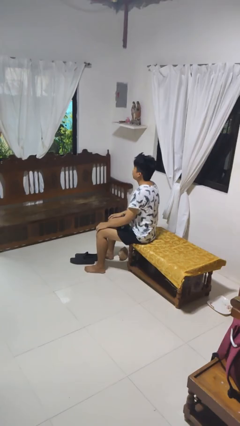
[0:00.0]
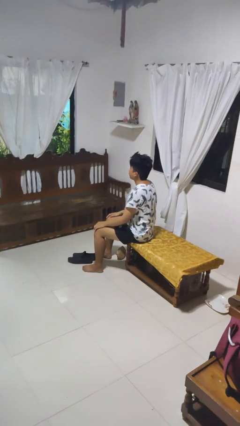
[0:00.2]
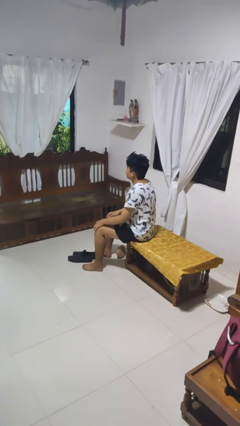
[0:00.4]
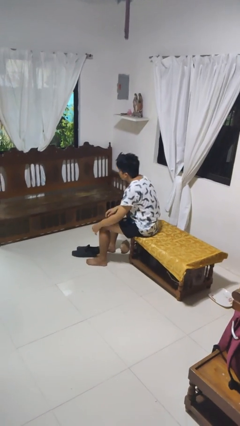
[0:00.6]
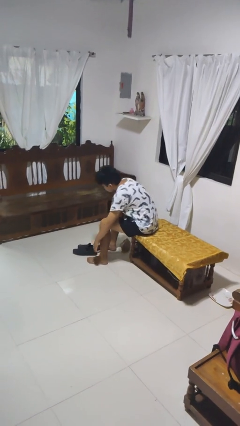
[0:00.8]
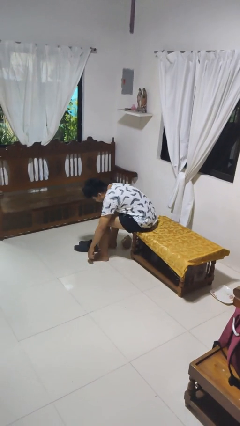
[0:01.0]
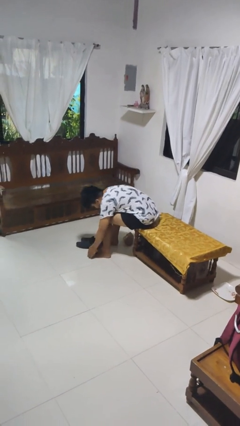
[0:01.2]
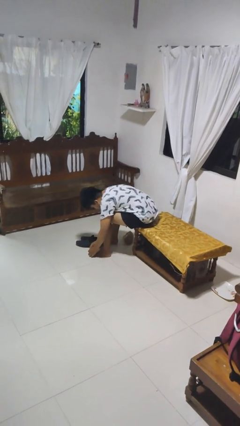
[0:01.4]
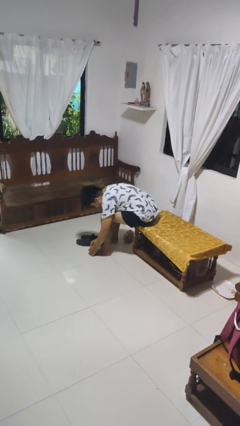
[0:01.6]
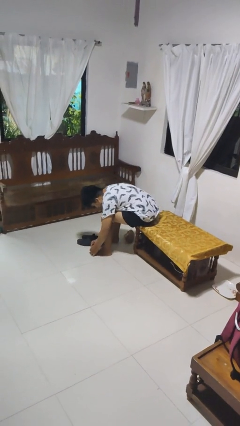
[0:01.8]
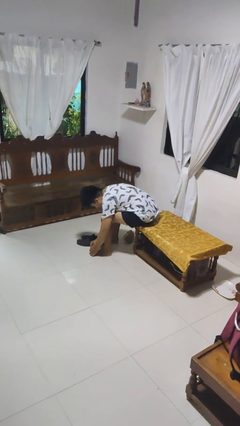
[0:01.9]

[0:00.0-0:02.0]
person rubs foot

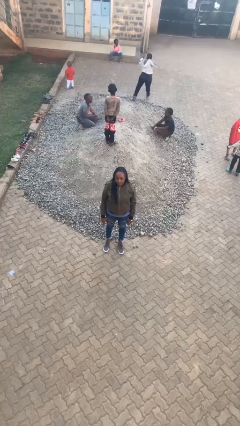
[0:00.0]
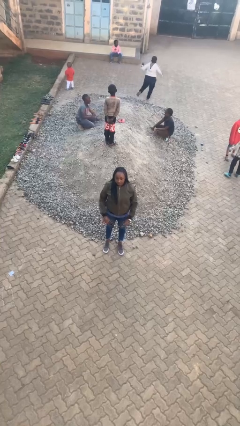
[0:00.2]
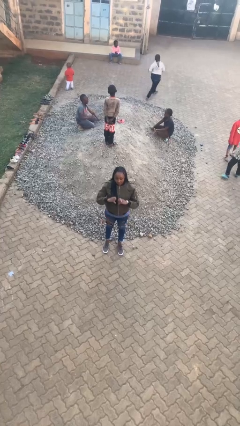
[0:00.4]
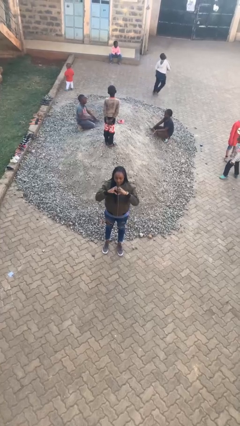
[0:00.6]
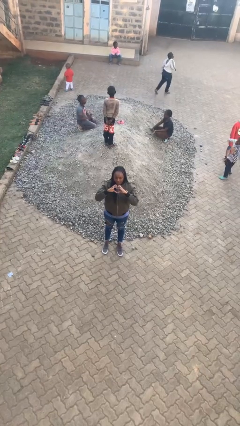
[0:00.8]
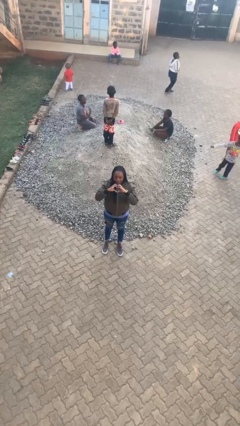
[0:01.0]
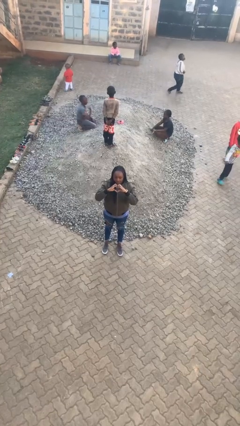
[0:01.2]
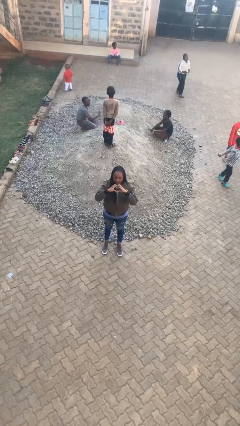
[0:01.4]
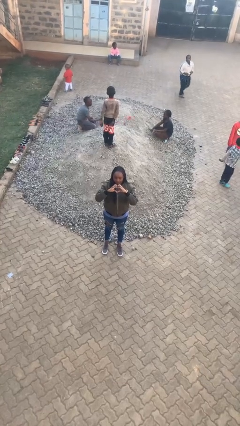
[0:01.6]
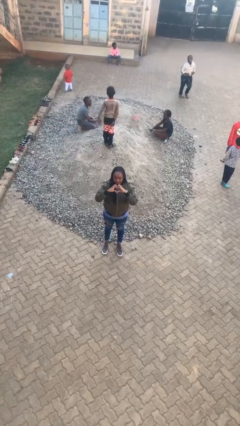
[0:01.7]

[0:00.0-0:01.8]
person gestures heart

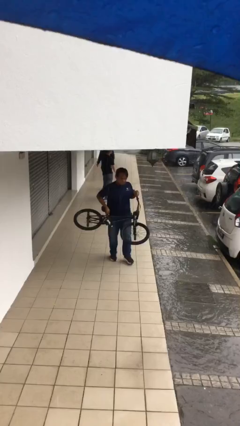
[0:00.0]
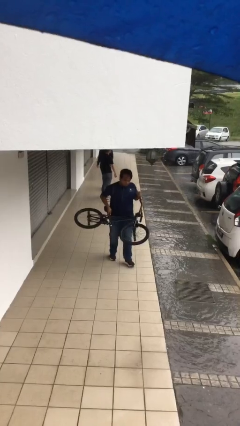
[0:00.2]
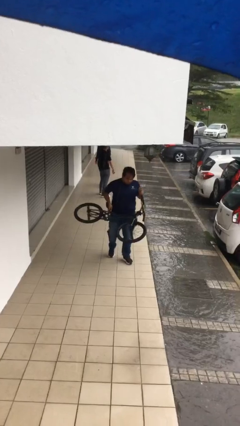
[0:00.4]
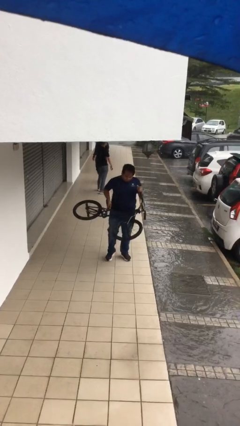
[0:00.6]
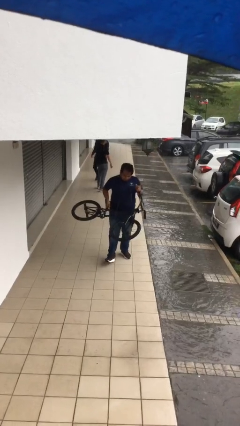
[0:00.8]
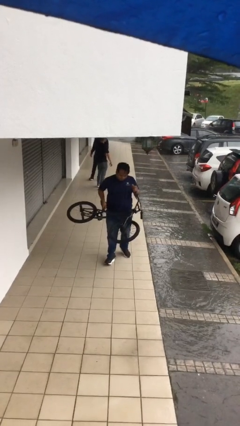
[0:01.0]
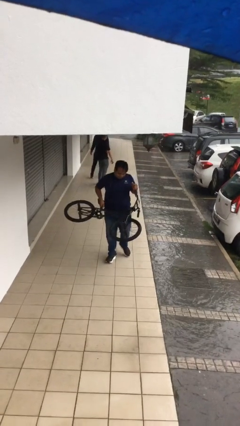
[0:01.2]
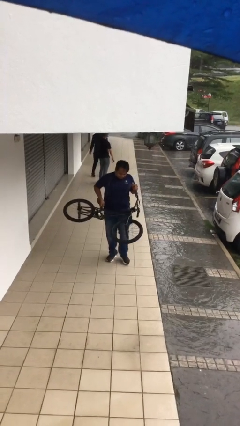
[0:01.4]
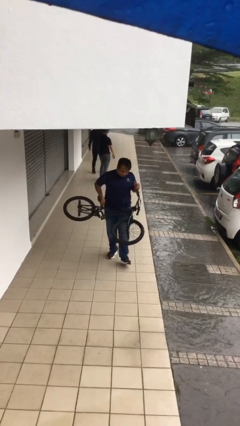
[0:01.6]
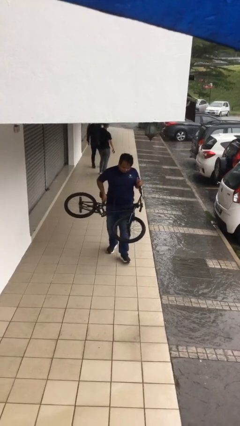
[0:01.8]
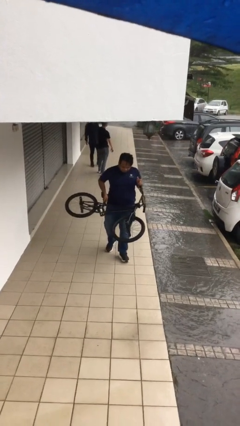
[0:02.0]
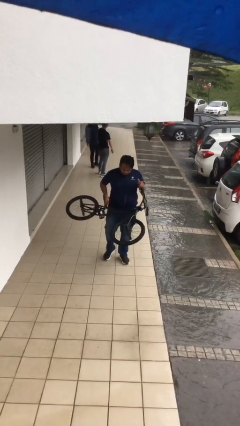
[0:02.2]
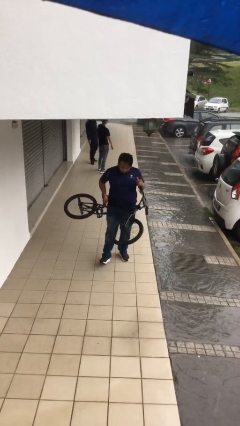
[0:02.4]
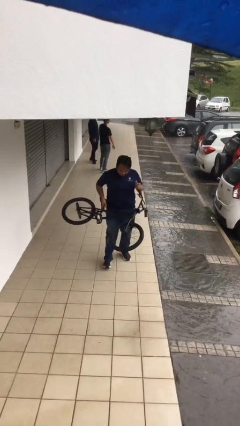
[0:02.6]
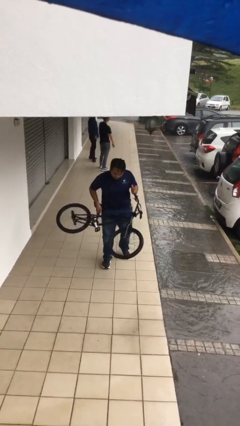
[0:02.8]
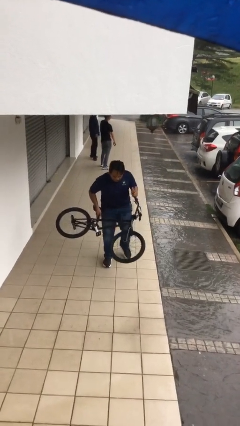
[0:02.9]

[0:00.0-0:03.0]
person carries heavy object

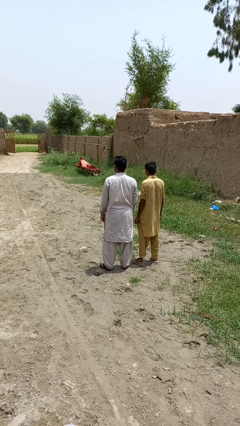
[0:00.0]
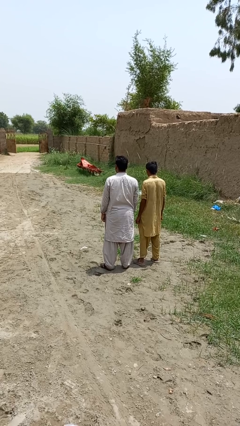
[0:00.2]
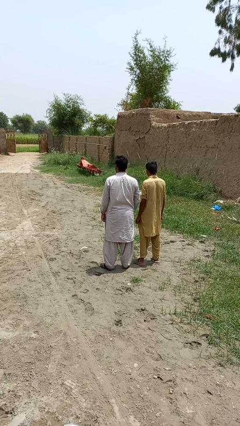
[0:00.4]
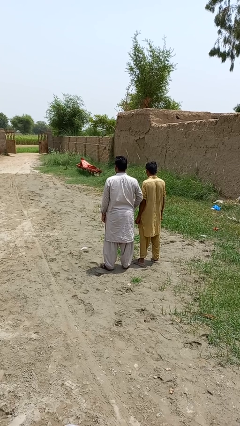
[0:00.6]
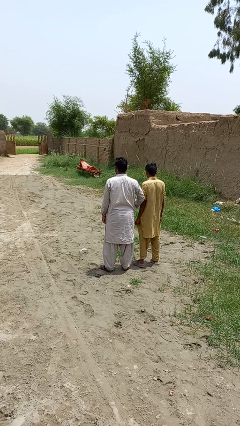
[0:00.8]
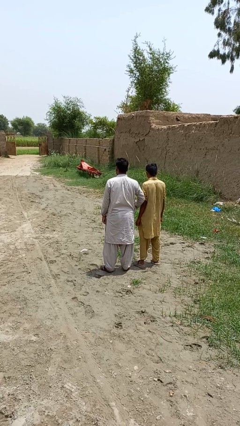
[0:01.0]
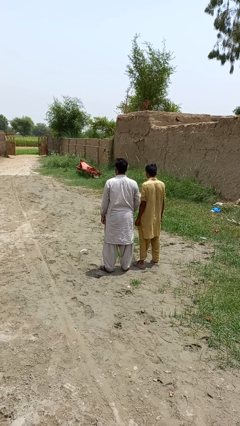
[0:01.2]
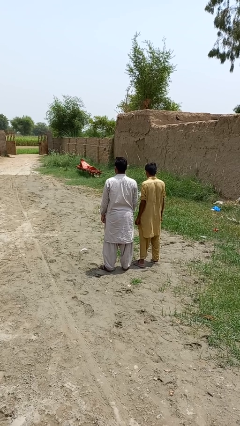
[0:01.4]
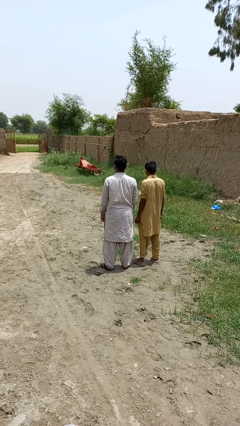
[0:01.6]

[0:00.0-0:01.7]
person nudges person with elbow

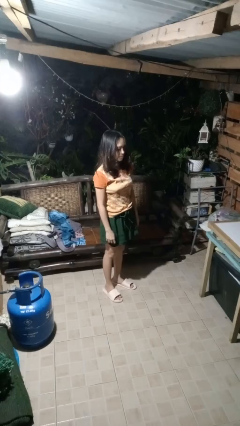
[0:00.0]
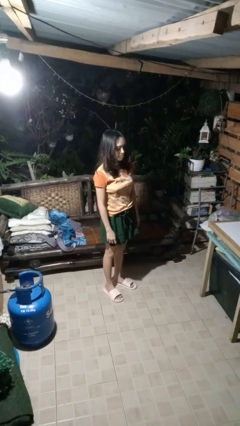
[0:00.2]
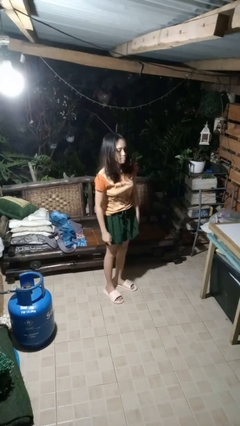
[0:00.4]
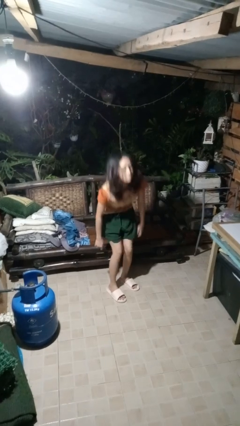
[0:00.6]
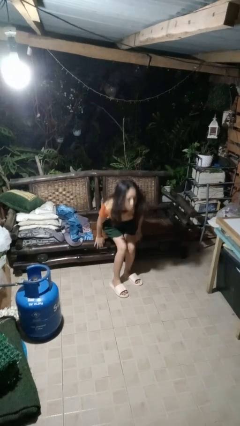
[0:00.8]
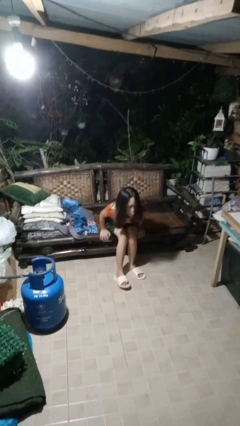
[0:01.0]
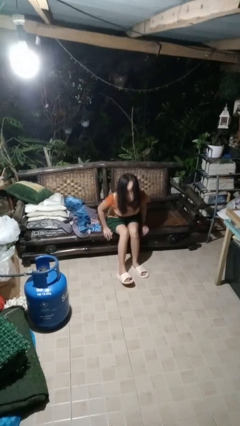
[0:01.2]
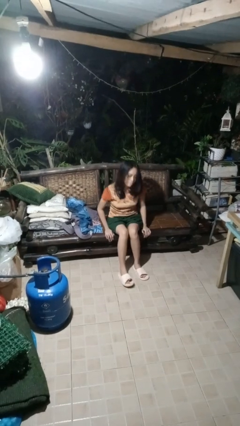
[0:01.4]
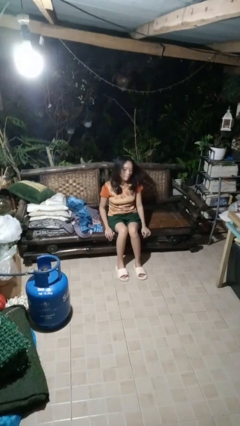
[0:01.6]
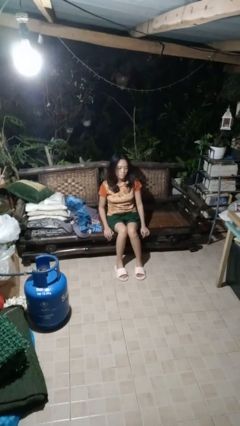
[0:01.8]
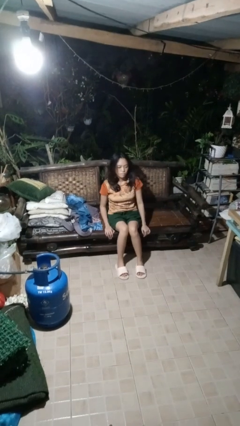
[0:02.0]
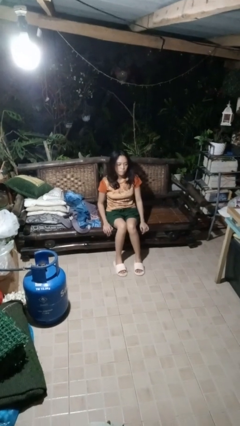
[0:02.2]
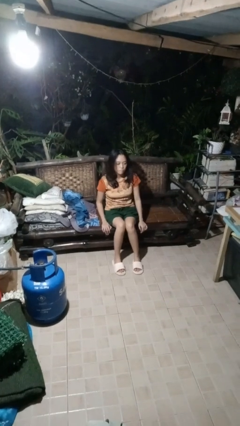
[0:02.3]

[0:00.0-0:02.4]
person sits down

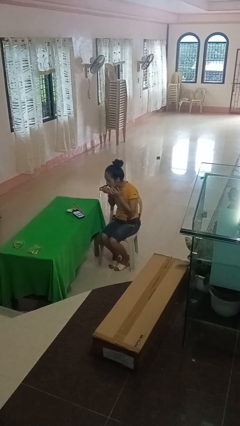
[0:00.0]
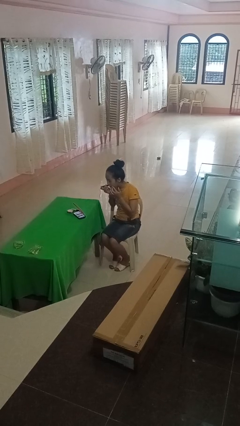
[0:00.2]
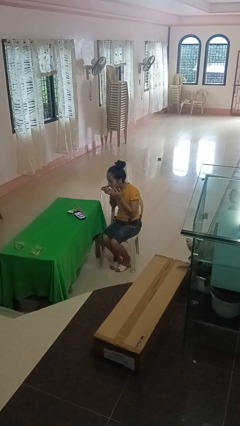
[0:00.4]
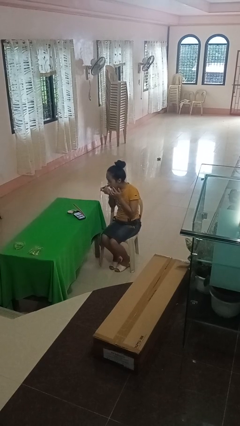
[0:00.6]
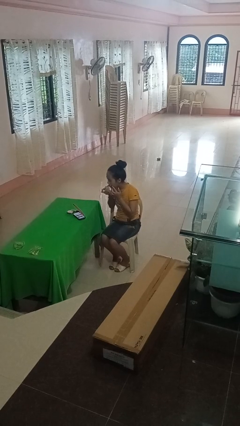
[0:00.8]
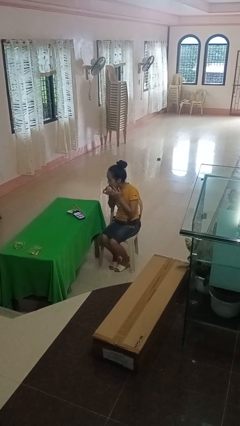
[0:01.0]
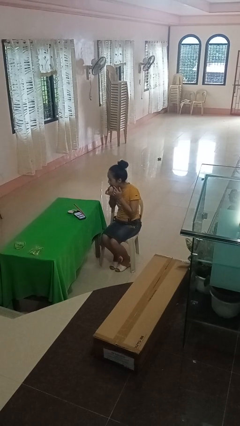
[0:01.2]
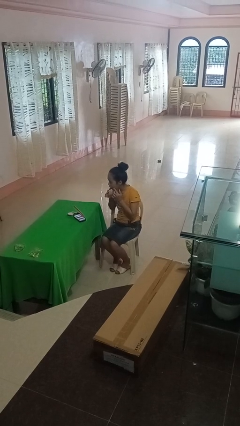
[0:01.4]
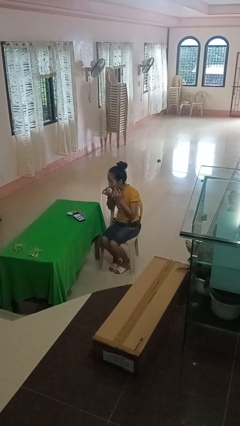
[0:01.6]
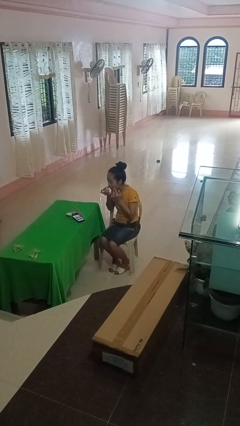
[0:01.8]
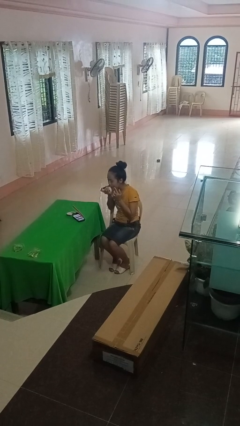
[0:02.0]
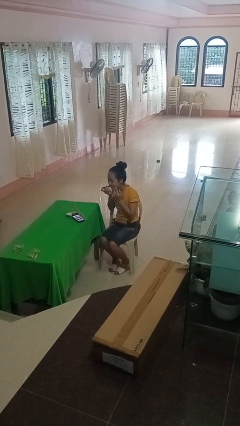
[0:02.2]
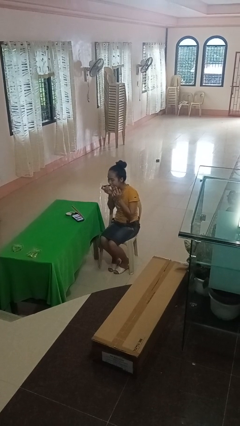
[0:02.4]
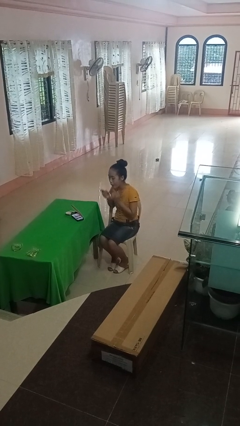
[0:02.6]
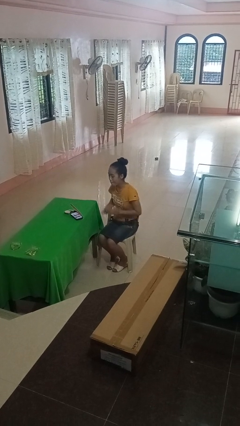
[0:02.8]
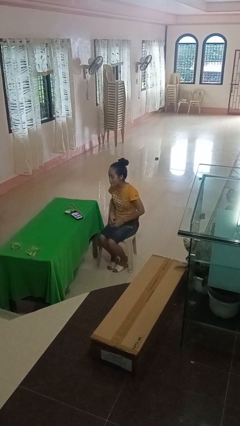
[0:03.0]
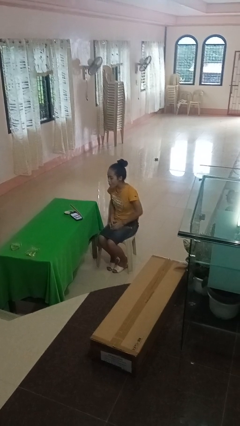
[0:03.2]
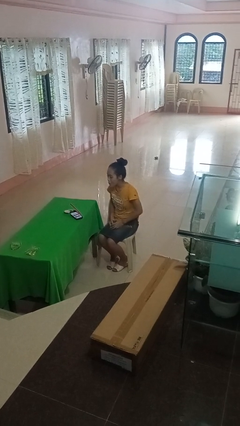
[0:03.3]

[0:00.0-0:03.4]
person applies lip makeup

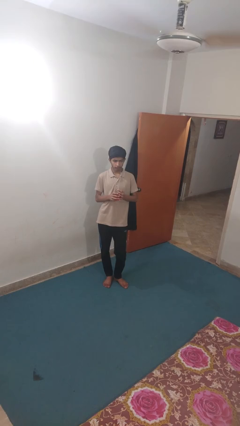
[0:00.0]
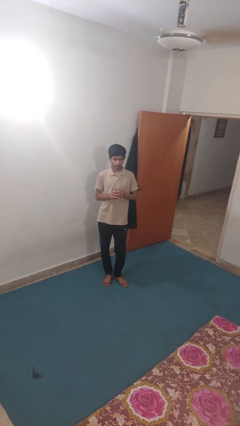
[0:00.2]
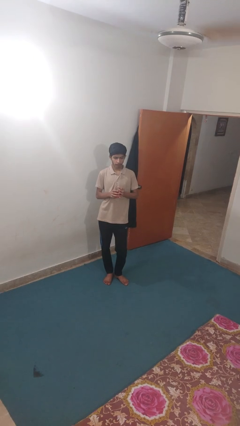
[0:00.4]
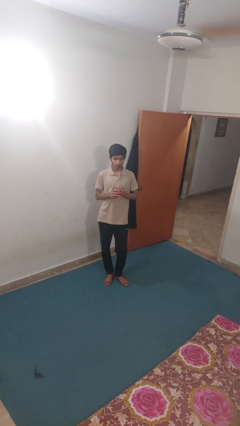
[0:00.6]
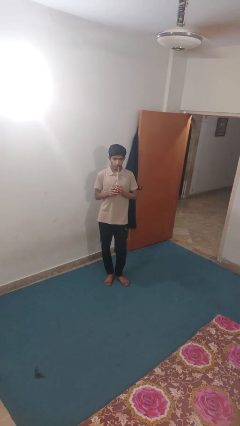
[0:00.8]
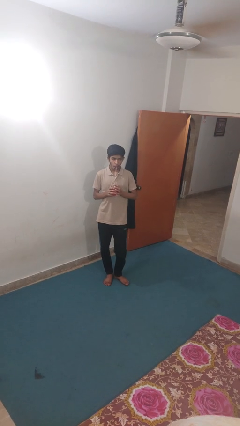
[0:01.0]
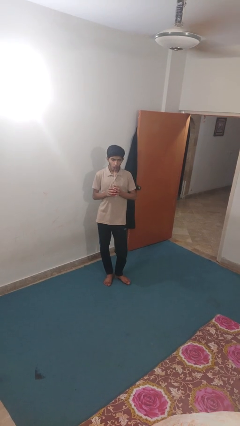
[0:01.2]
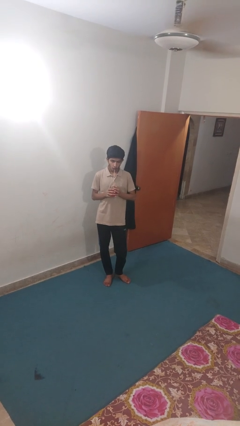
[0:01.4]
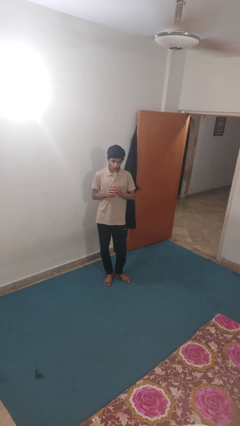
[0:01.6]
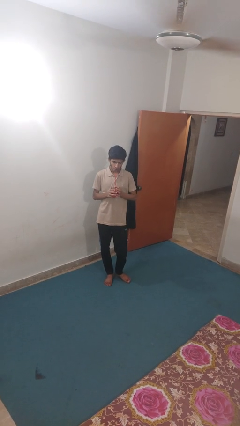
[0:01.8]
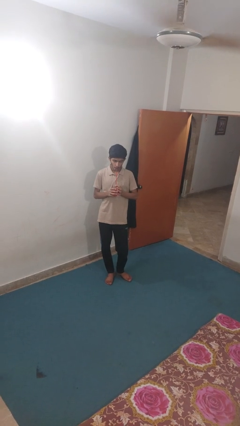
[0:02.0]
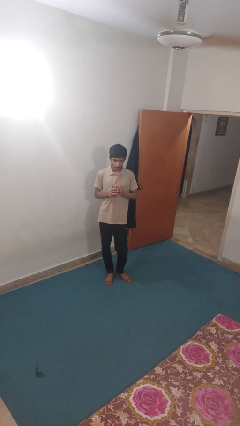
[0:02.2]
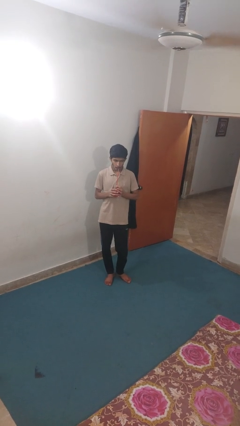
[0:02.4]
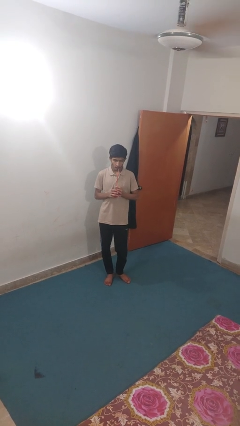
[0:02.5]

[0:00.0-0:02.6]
person drinks from straw
